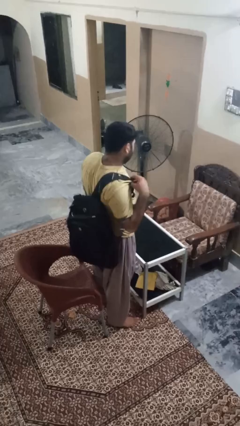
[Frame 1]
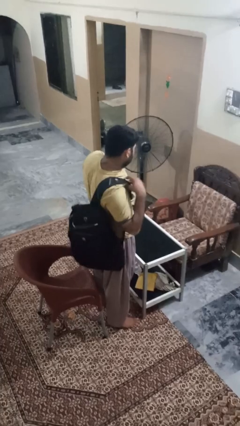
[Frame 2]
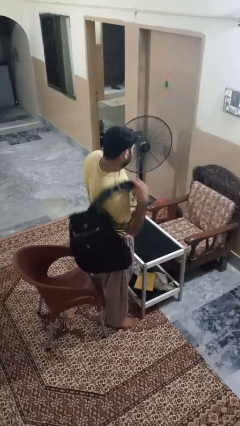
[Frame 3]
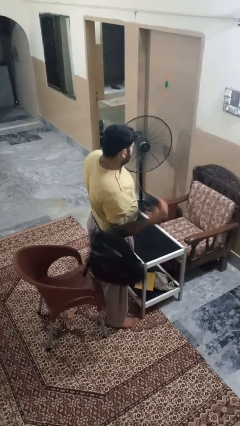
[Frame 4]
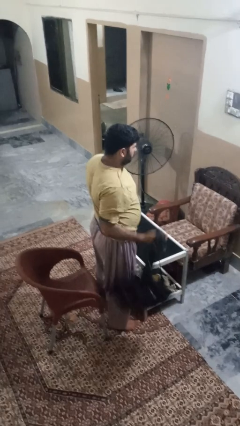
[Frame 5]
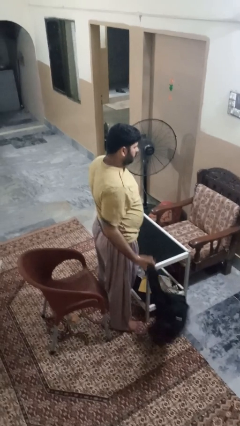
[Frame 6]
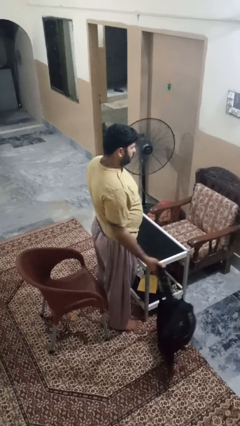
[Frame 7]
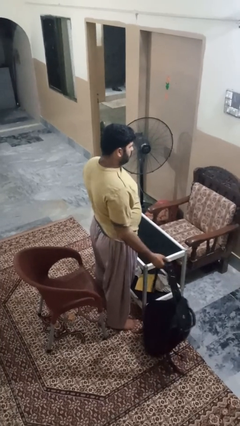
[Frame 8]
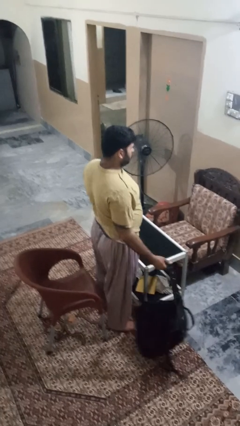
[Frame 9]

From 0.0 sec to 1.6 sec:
person takes off backpack

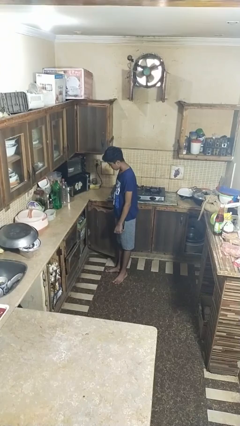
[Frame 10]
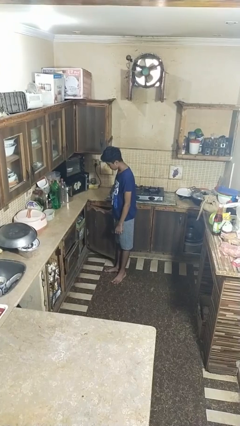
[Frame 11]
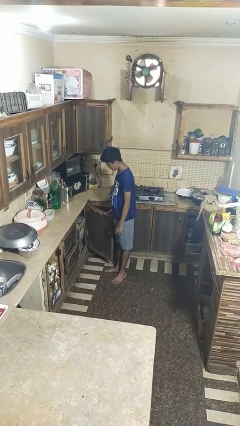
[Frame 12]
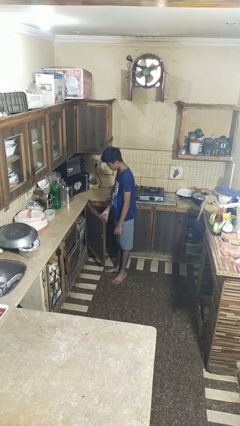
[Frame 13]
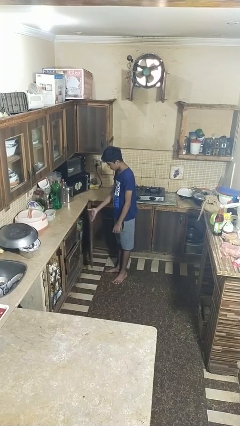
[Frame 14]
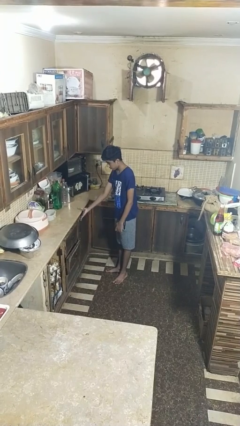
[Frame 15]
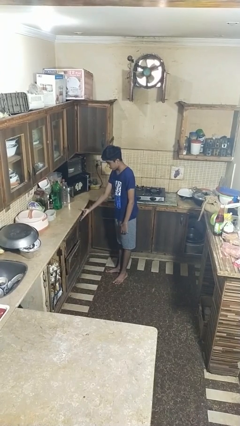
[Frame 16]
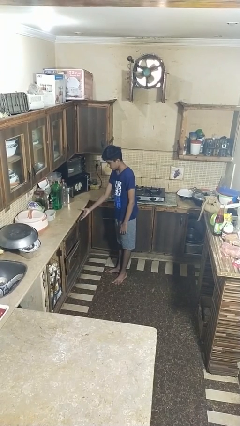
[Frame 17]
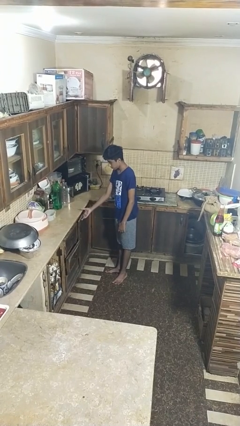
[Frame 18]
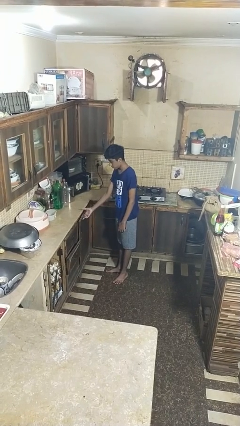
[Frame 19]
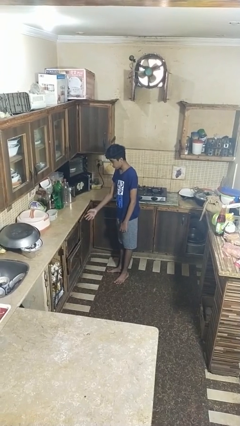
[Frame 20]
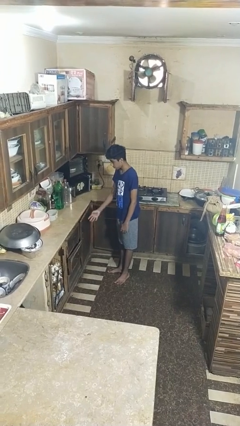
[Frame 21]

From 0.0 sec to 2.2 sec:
person closes closet door

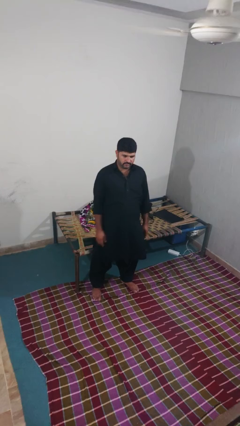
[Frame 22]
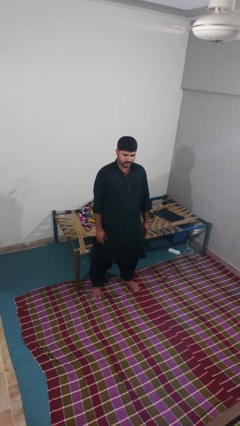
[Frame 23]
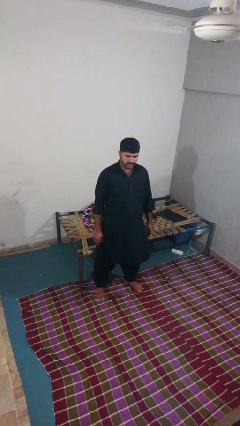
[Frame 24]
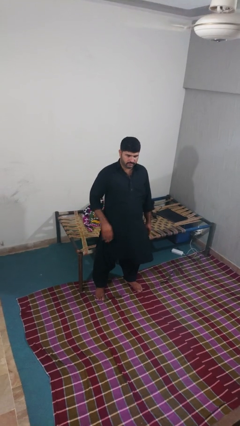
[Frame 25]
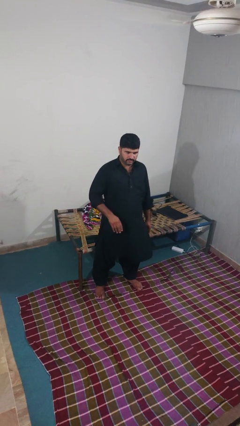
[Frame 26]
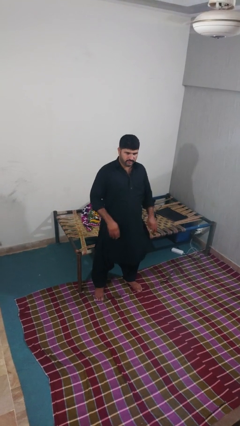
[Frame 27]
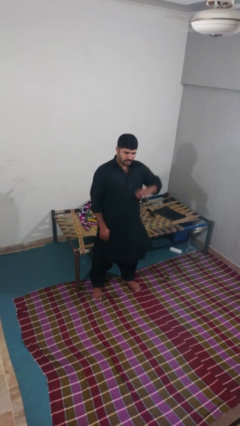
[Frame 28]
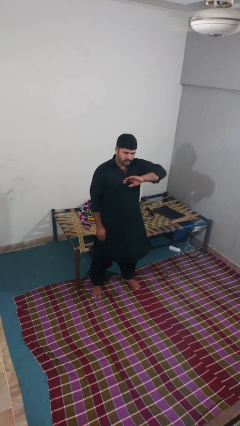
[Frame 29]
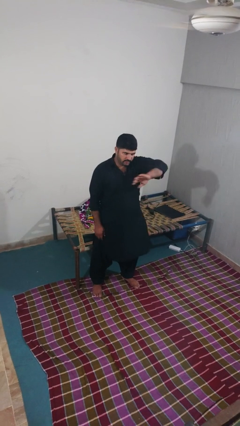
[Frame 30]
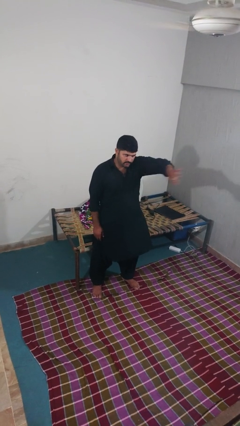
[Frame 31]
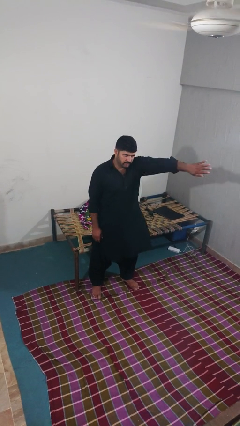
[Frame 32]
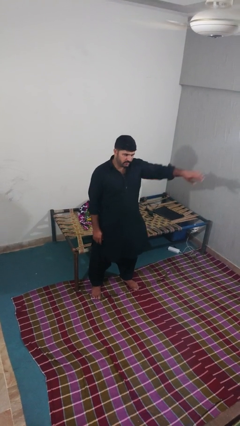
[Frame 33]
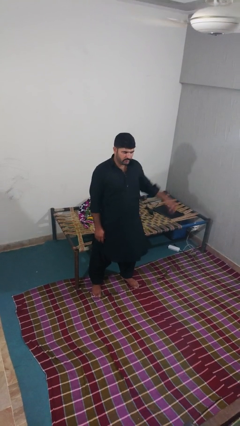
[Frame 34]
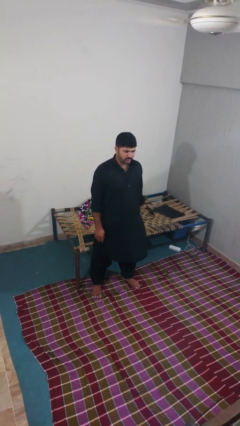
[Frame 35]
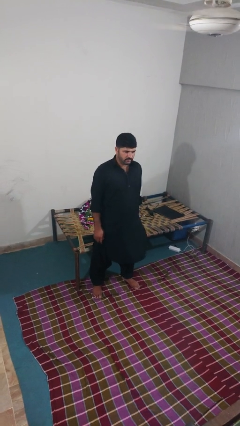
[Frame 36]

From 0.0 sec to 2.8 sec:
person gestures swipe left

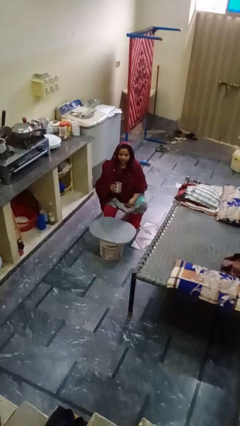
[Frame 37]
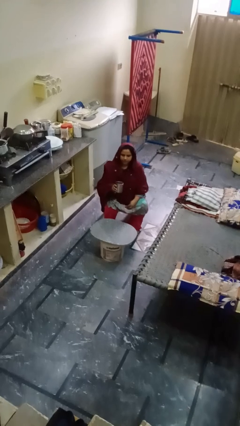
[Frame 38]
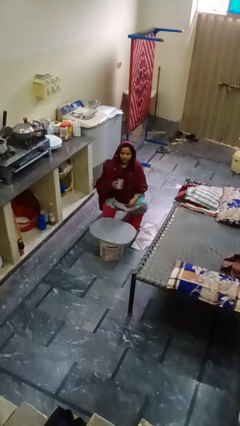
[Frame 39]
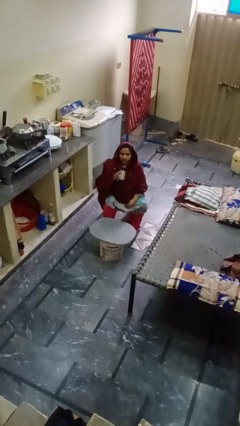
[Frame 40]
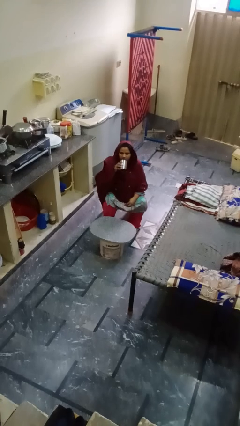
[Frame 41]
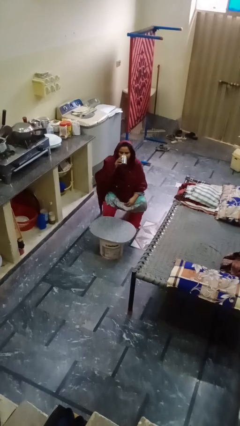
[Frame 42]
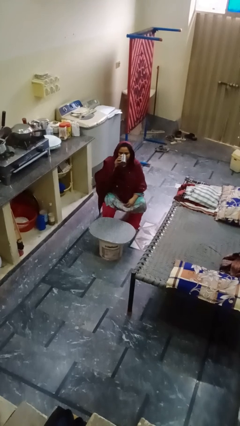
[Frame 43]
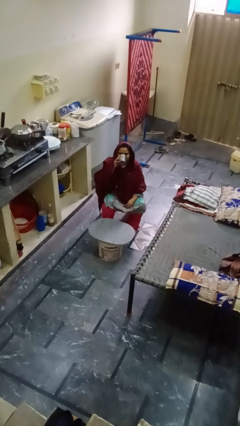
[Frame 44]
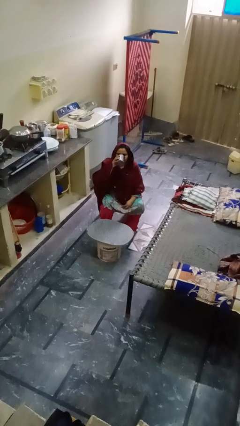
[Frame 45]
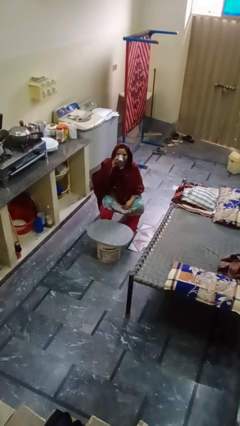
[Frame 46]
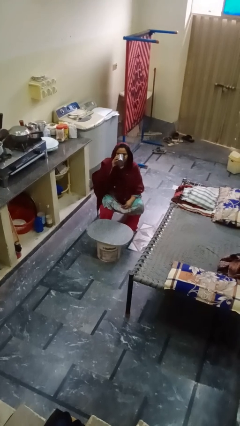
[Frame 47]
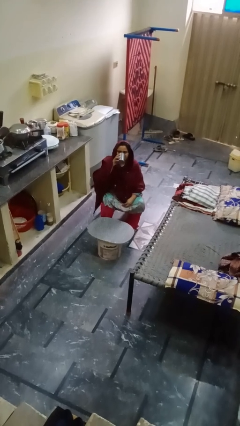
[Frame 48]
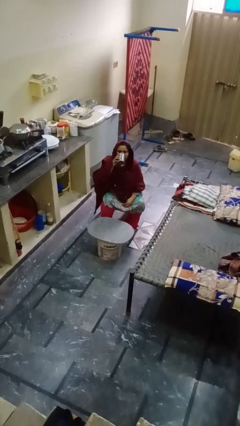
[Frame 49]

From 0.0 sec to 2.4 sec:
person drinks from shotglass

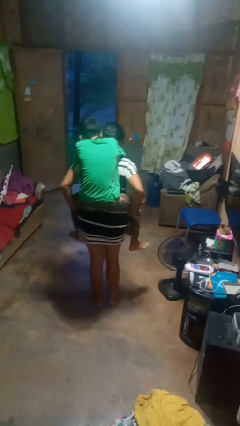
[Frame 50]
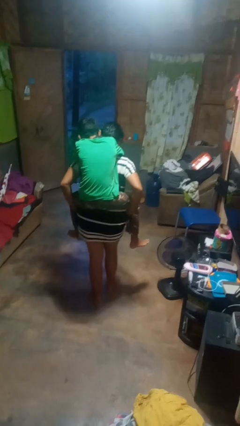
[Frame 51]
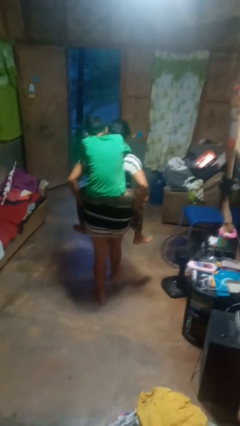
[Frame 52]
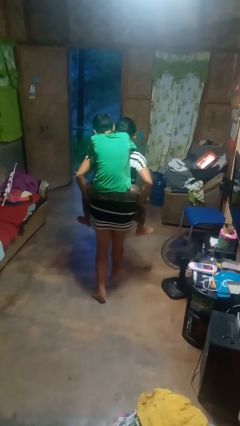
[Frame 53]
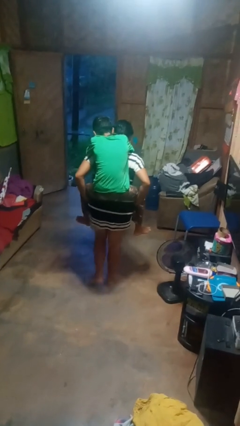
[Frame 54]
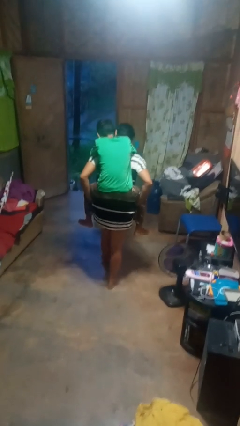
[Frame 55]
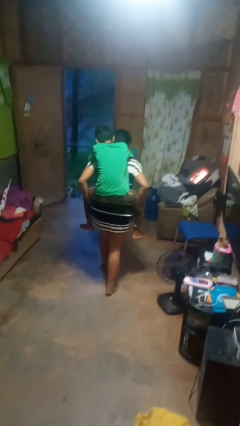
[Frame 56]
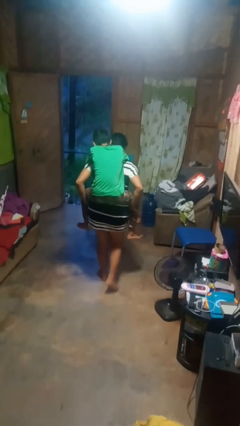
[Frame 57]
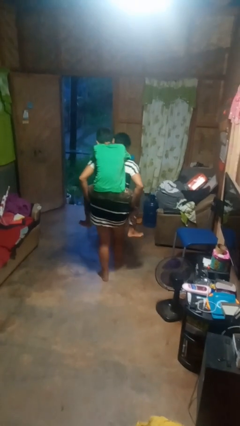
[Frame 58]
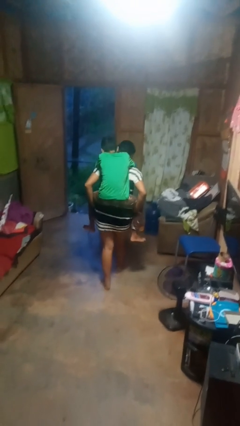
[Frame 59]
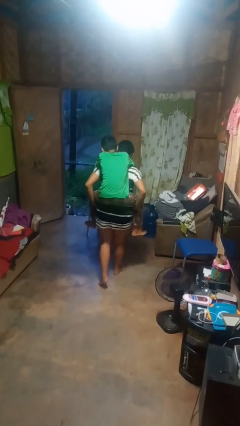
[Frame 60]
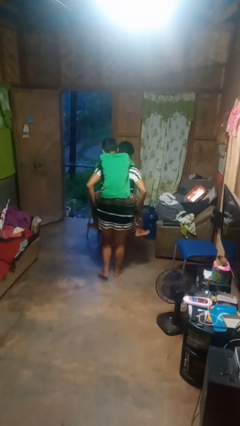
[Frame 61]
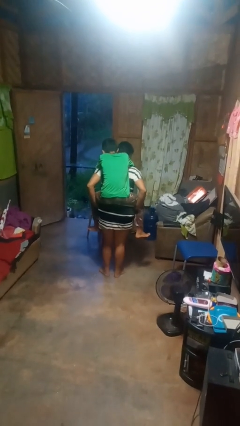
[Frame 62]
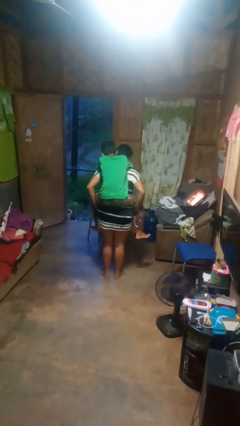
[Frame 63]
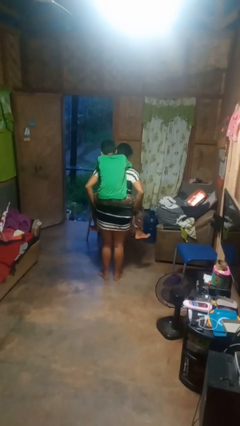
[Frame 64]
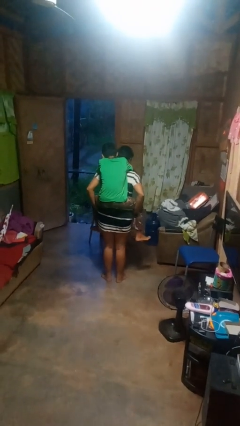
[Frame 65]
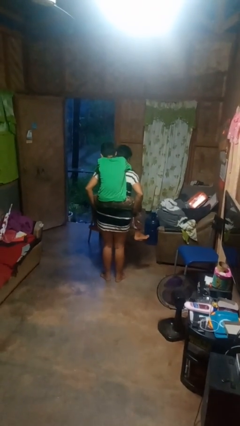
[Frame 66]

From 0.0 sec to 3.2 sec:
person carries person on back

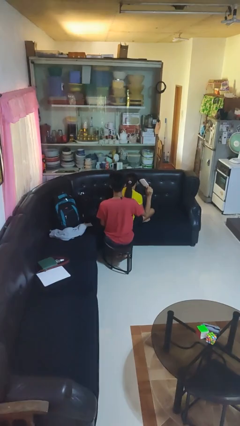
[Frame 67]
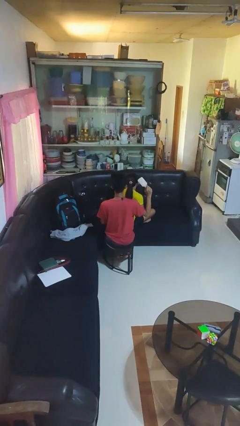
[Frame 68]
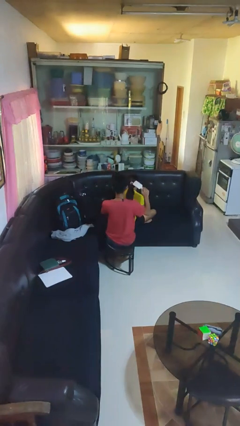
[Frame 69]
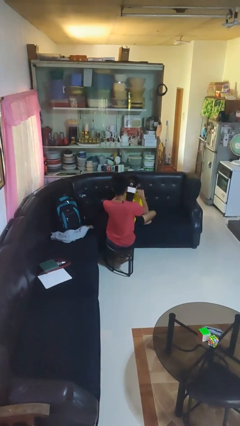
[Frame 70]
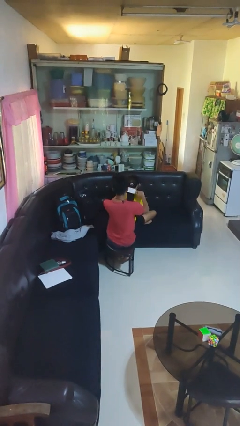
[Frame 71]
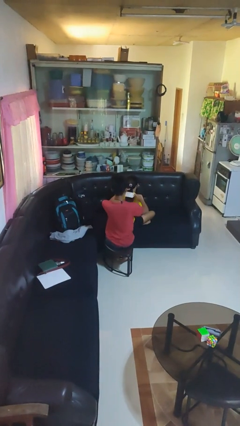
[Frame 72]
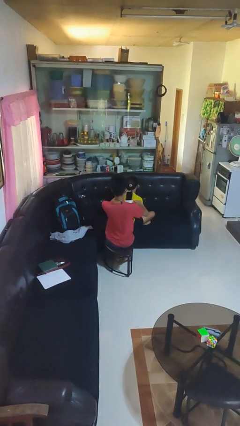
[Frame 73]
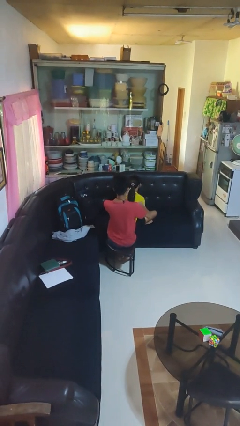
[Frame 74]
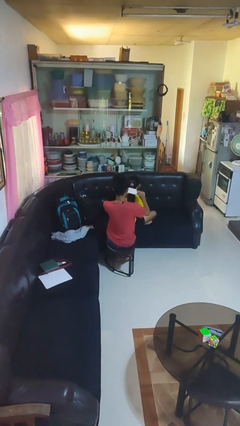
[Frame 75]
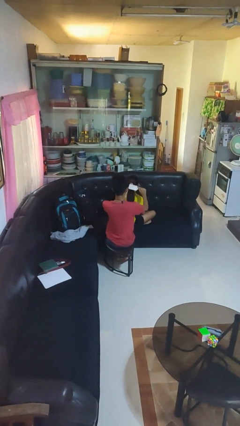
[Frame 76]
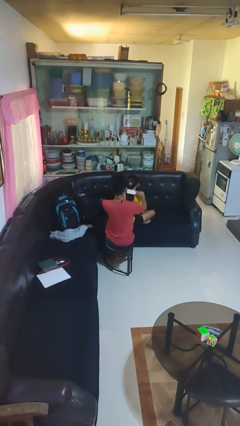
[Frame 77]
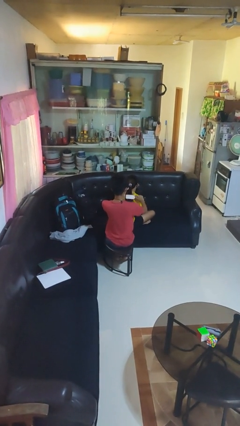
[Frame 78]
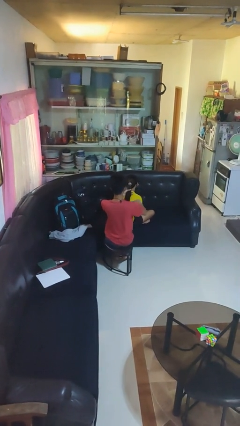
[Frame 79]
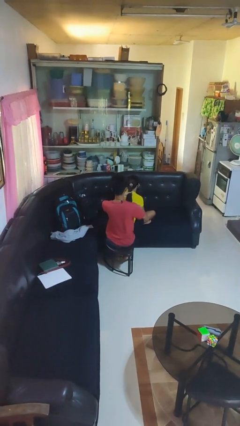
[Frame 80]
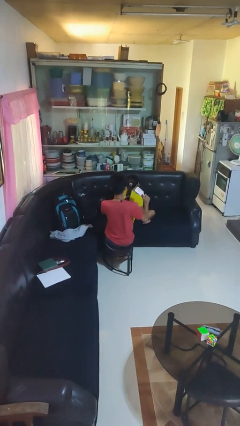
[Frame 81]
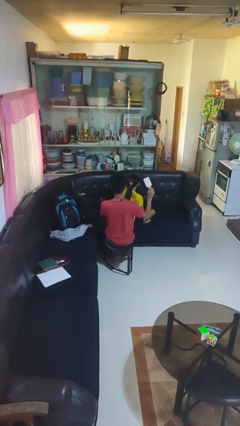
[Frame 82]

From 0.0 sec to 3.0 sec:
person brushes hair of person

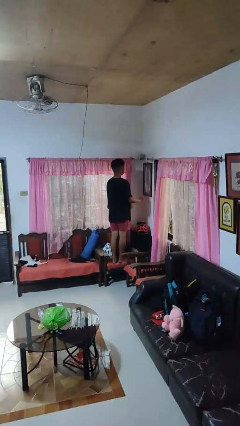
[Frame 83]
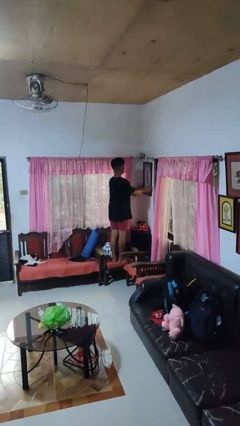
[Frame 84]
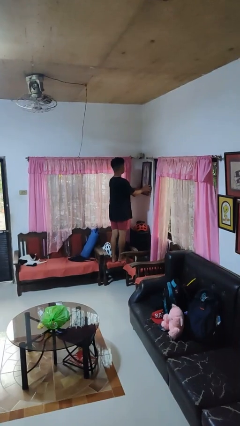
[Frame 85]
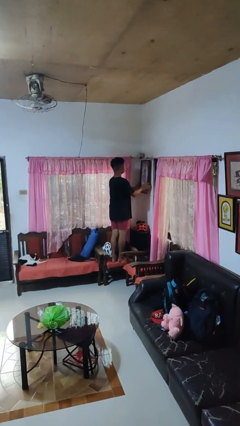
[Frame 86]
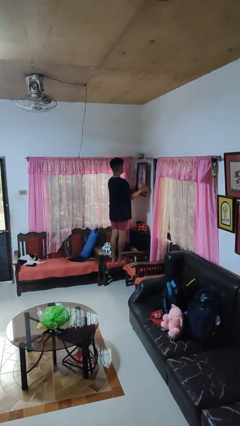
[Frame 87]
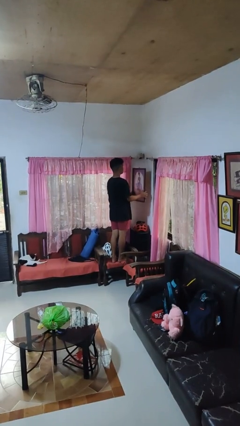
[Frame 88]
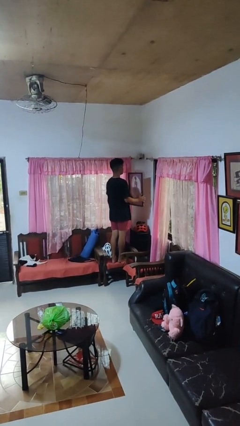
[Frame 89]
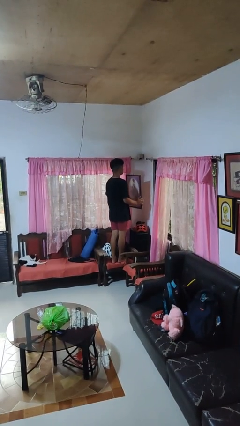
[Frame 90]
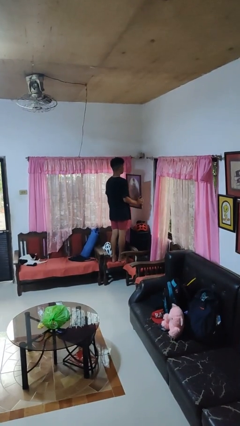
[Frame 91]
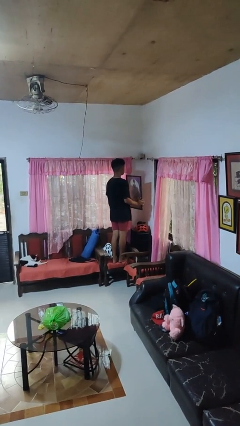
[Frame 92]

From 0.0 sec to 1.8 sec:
person takes down picture frame
